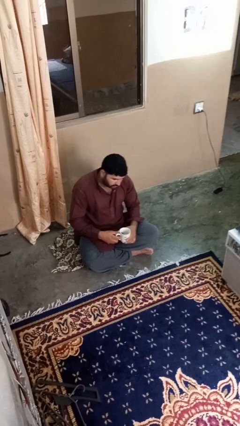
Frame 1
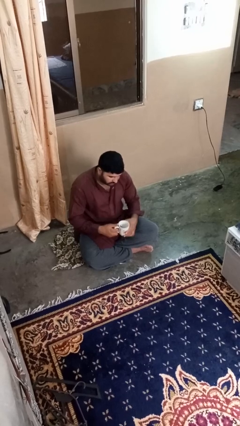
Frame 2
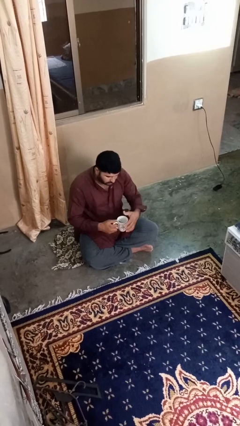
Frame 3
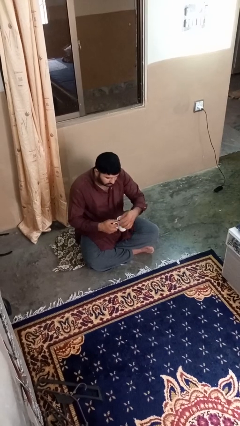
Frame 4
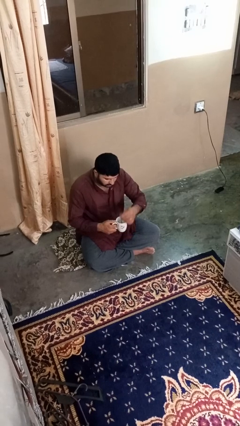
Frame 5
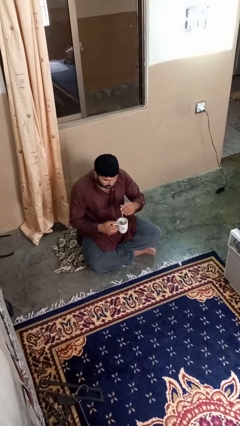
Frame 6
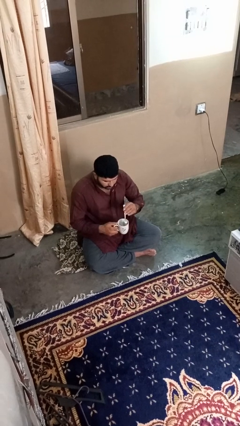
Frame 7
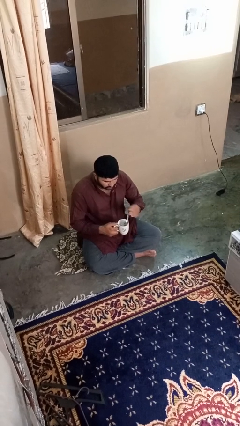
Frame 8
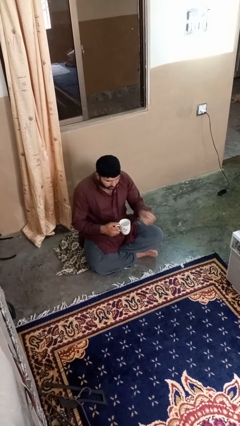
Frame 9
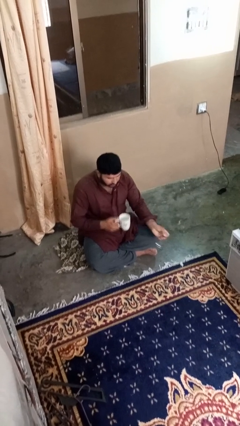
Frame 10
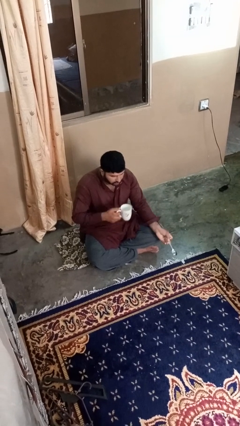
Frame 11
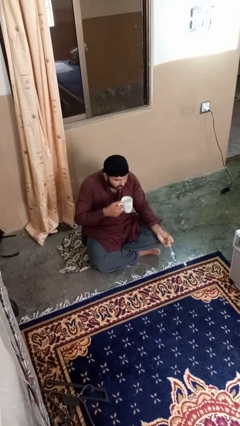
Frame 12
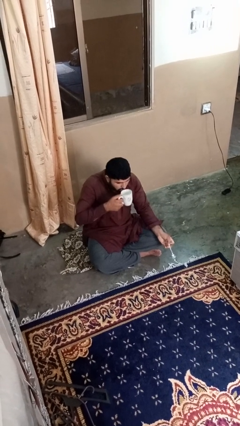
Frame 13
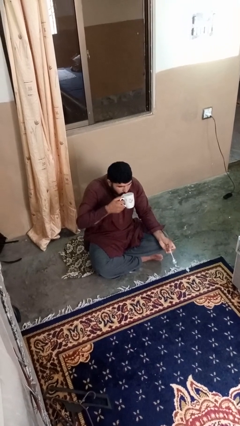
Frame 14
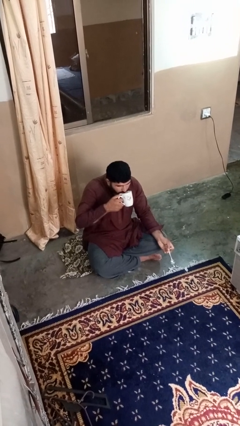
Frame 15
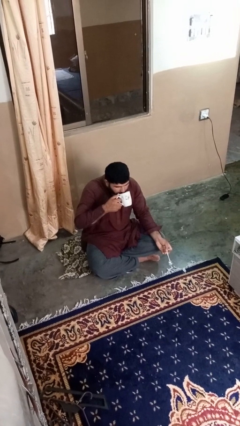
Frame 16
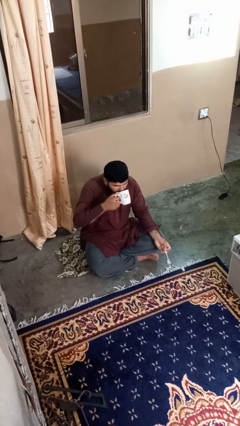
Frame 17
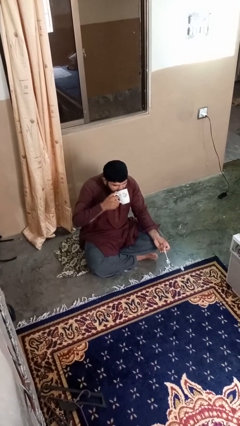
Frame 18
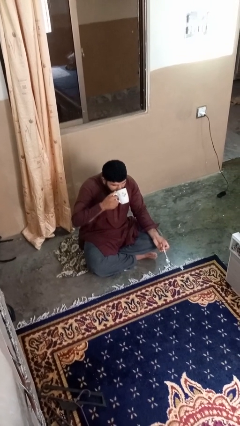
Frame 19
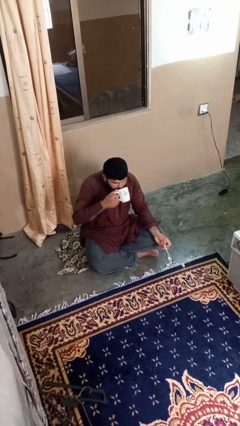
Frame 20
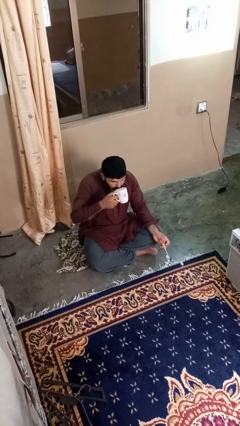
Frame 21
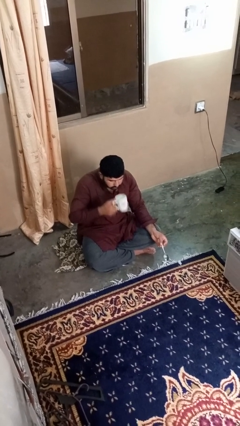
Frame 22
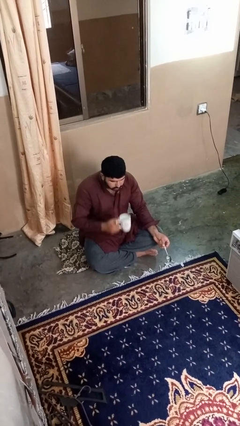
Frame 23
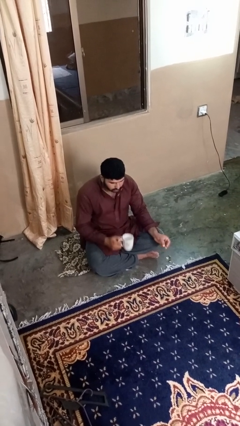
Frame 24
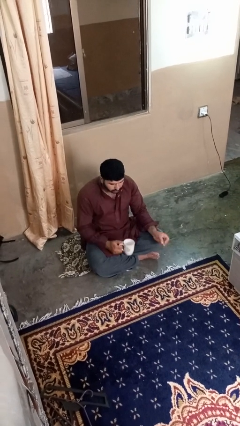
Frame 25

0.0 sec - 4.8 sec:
person drinks from mug

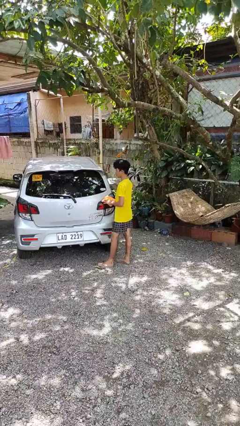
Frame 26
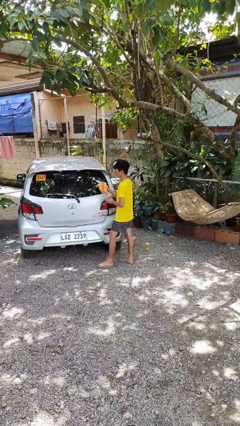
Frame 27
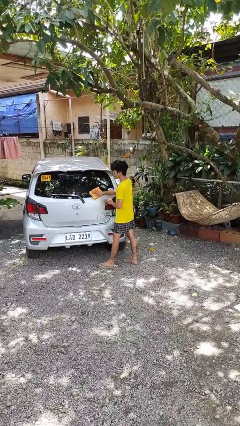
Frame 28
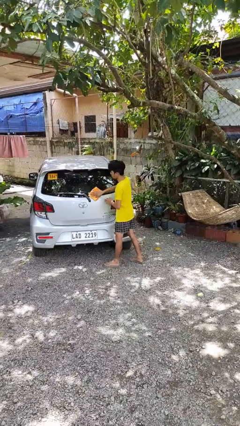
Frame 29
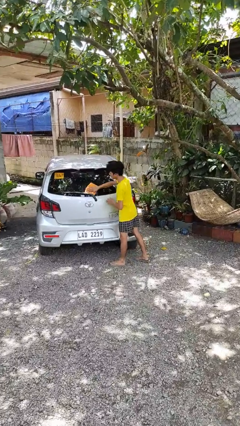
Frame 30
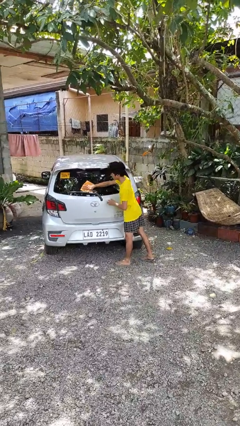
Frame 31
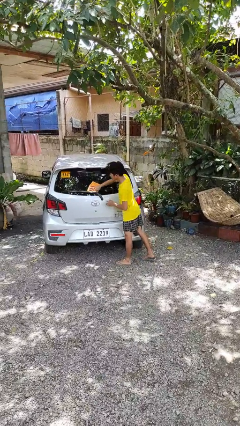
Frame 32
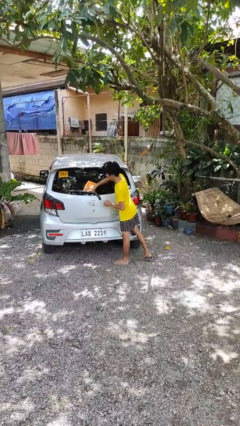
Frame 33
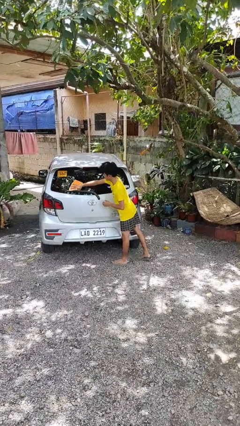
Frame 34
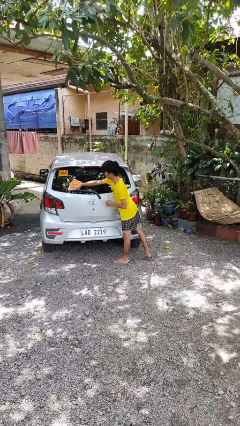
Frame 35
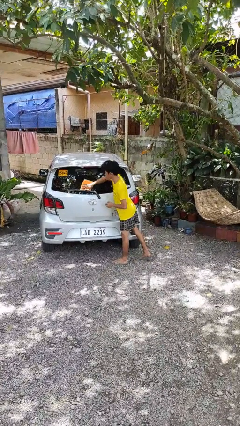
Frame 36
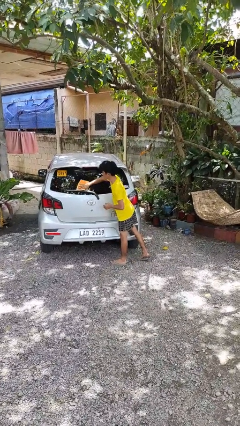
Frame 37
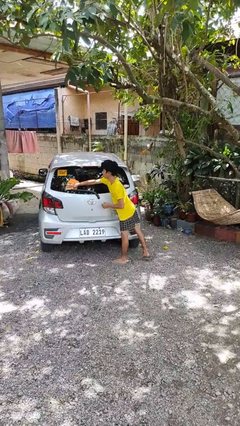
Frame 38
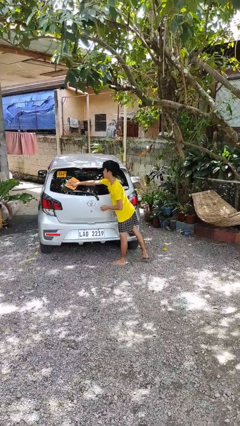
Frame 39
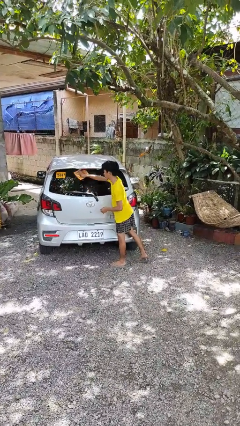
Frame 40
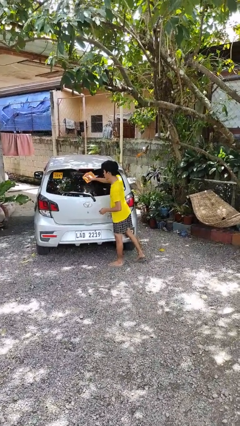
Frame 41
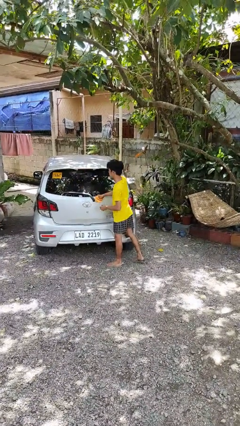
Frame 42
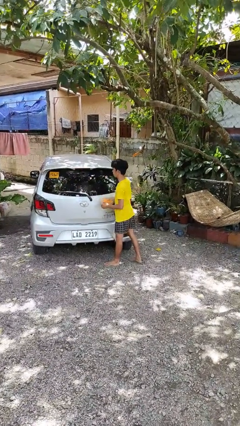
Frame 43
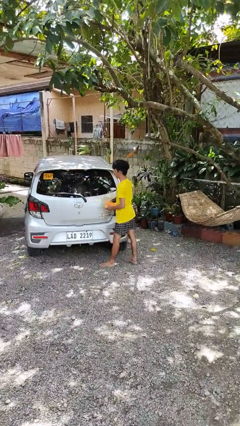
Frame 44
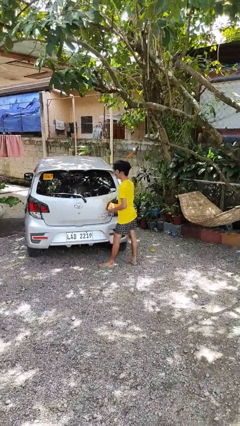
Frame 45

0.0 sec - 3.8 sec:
person polishes car with rag

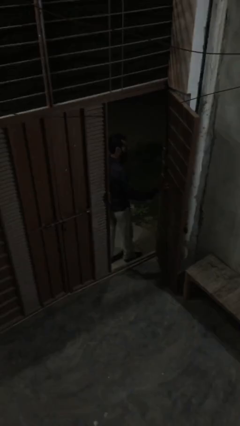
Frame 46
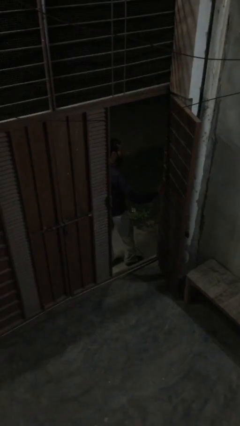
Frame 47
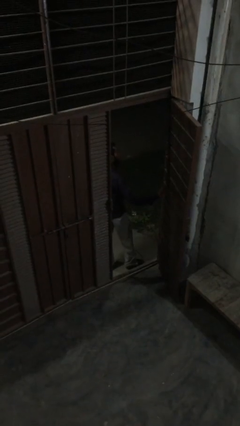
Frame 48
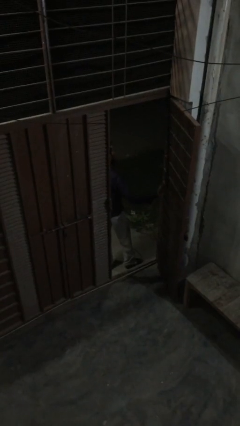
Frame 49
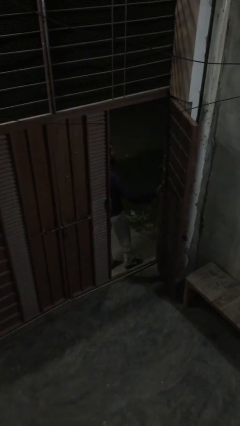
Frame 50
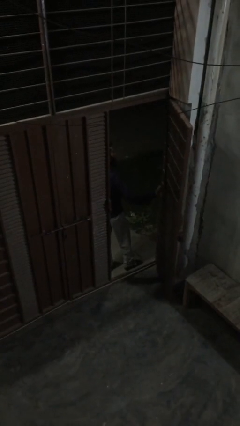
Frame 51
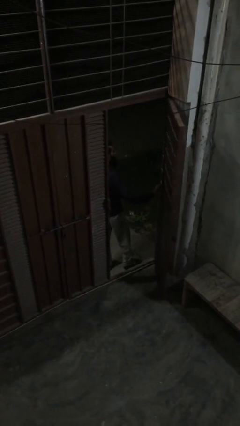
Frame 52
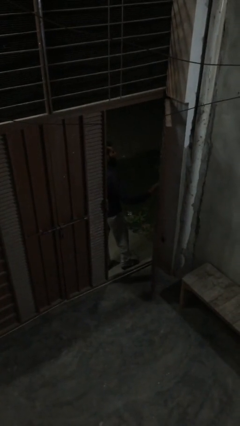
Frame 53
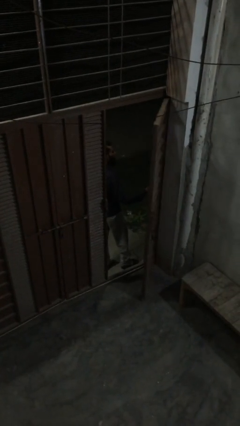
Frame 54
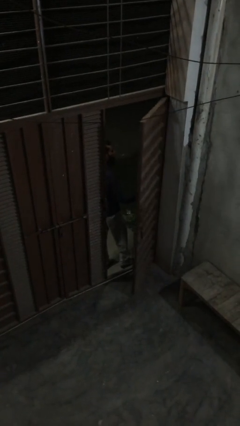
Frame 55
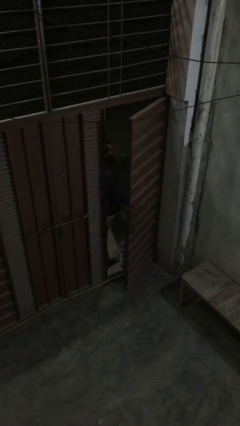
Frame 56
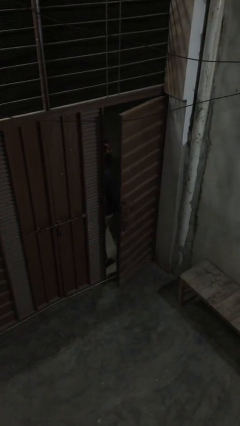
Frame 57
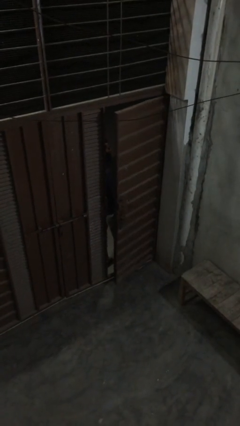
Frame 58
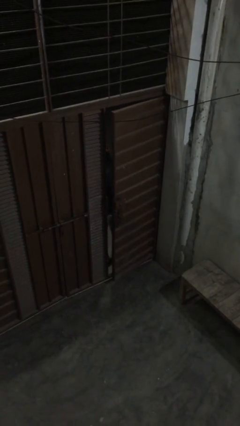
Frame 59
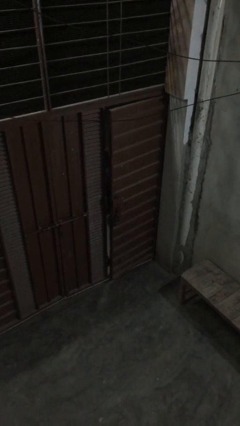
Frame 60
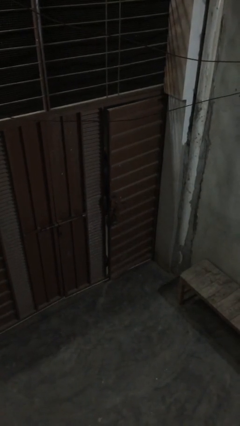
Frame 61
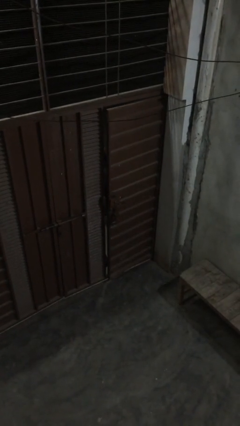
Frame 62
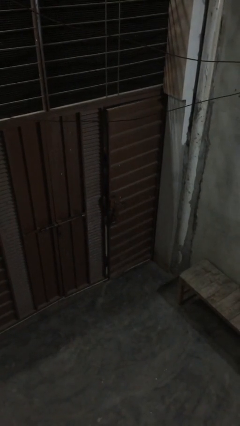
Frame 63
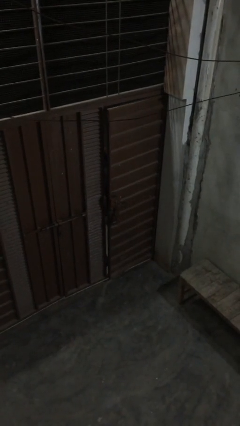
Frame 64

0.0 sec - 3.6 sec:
person closes facility door

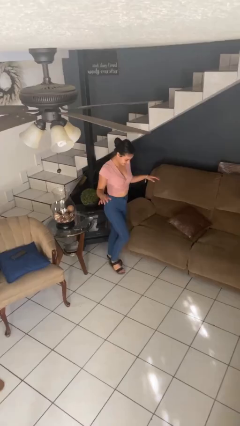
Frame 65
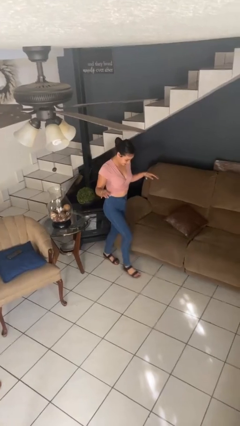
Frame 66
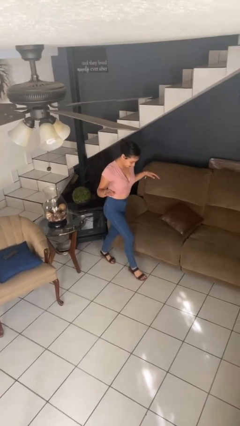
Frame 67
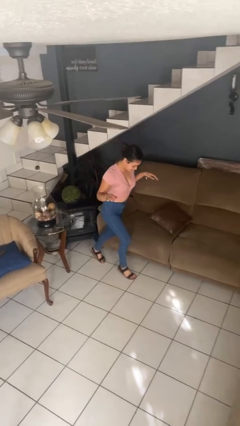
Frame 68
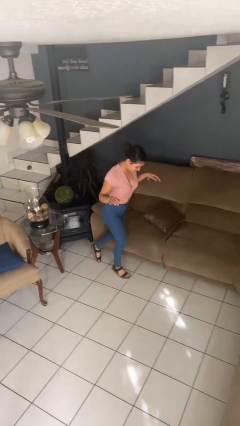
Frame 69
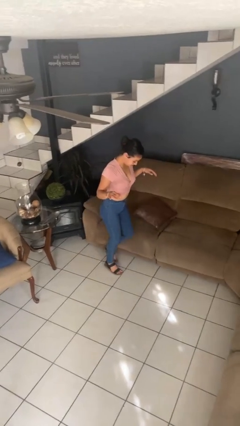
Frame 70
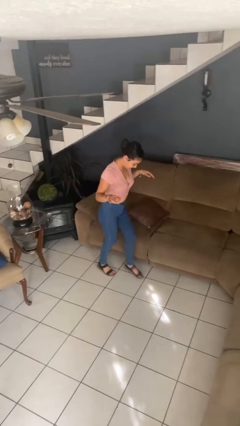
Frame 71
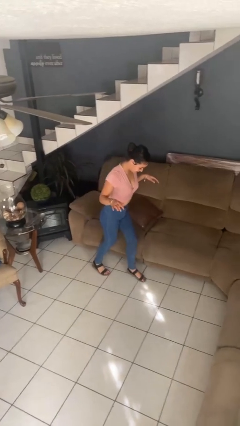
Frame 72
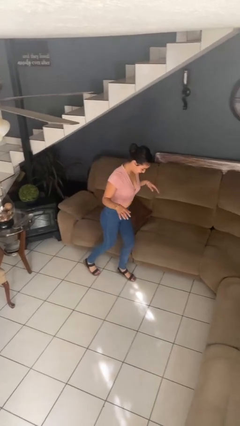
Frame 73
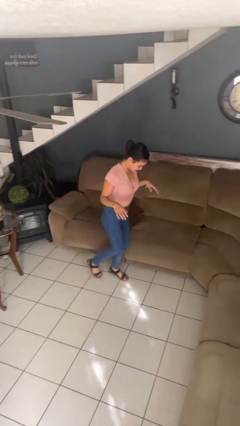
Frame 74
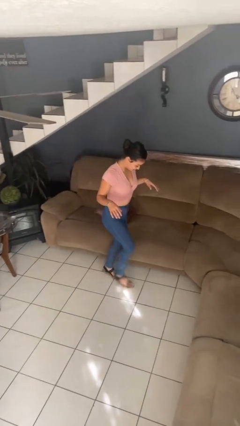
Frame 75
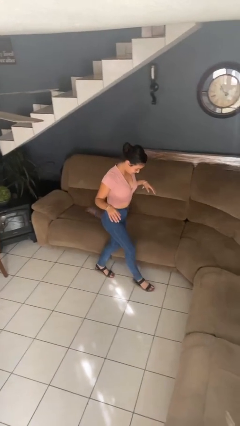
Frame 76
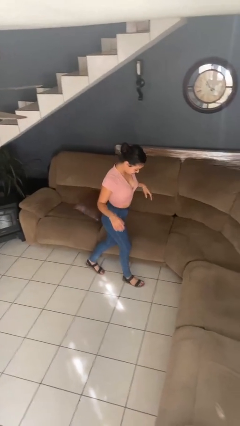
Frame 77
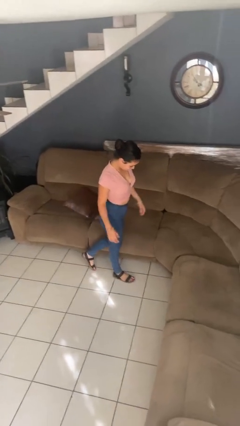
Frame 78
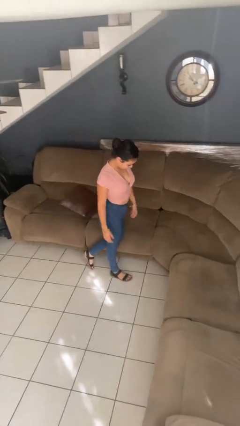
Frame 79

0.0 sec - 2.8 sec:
person walks tiptoe

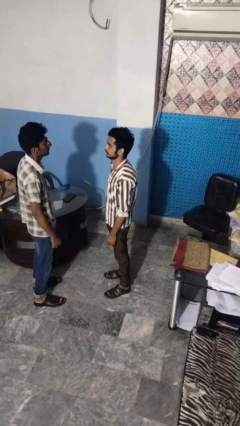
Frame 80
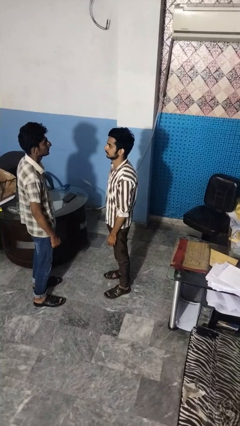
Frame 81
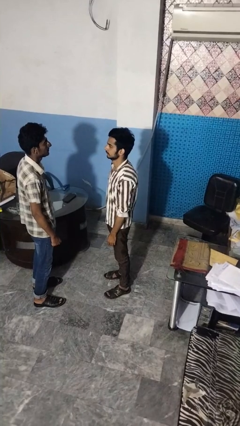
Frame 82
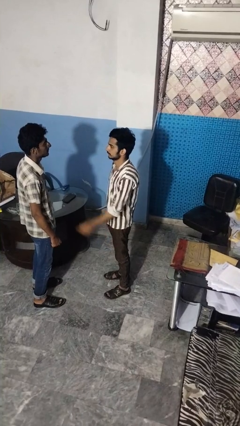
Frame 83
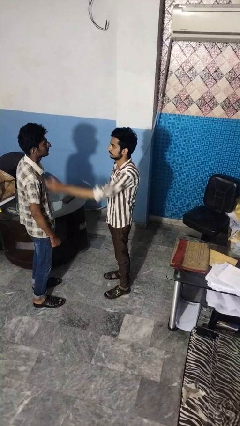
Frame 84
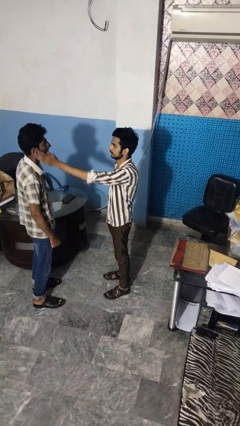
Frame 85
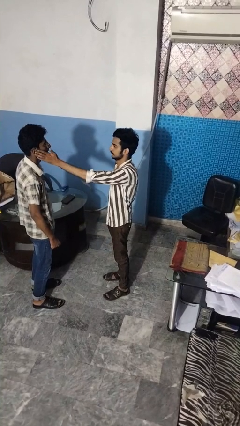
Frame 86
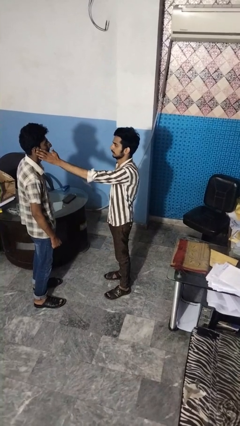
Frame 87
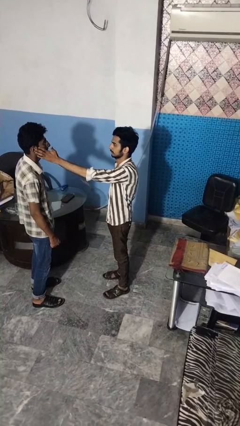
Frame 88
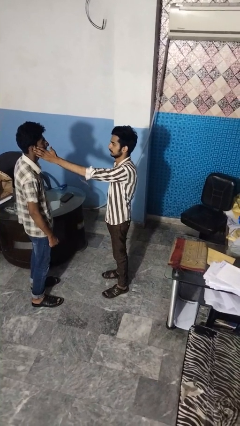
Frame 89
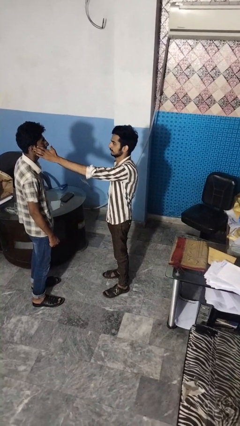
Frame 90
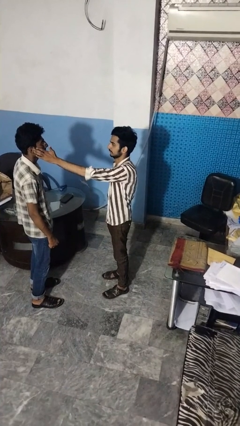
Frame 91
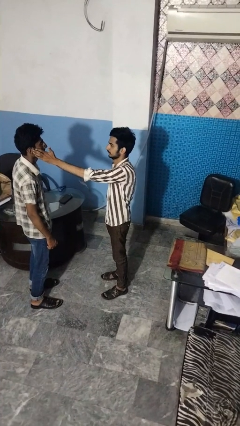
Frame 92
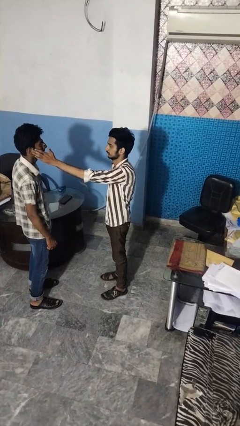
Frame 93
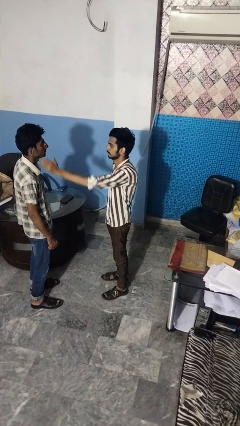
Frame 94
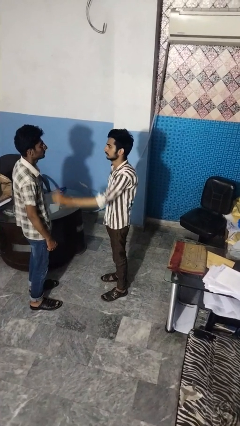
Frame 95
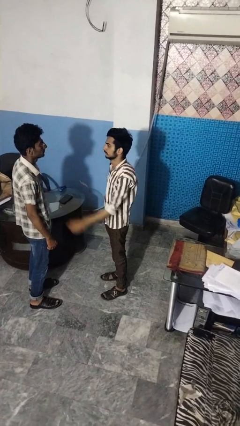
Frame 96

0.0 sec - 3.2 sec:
person touches face of person
